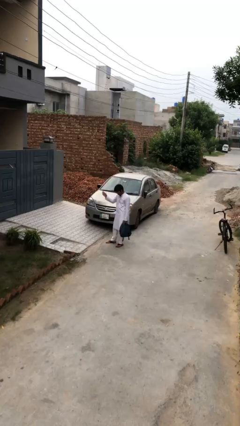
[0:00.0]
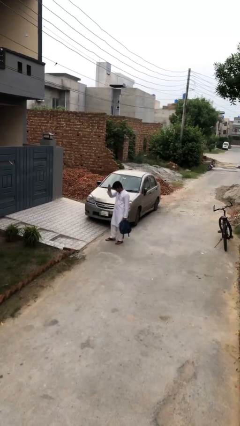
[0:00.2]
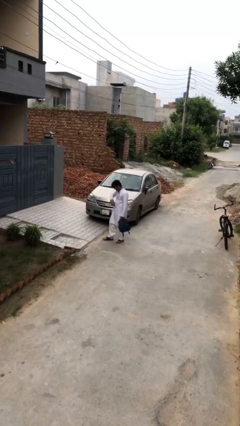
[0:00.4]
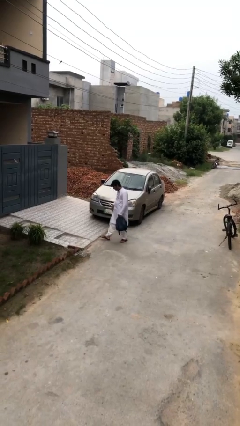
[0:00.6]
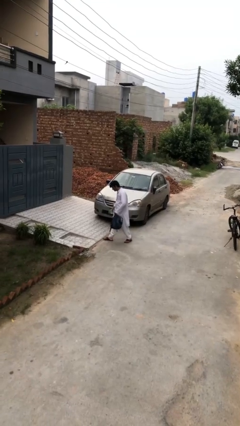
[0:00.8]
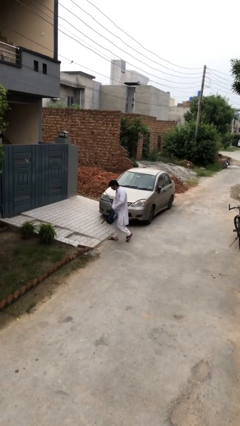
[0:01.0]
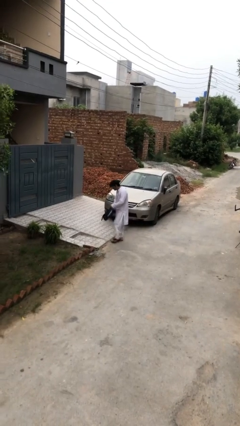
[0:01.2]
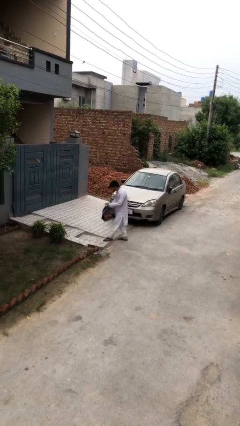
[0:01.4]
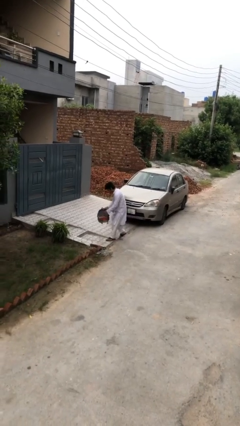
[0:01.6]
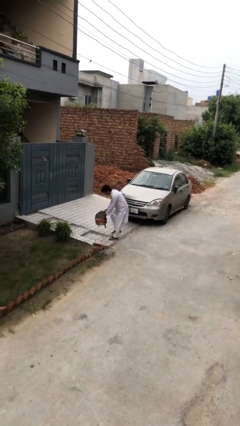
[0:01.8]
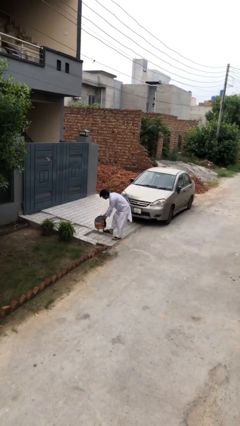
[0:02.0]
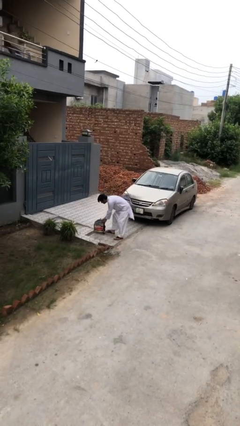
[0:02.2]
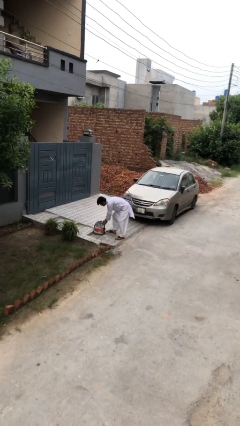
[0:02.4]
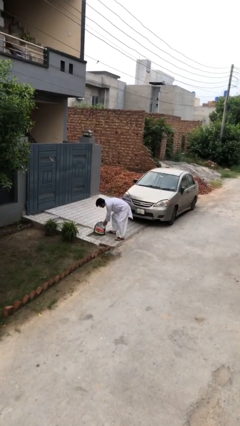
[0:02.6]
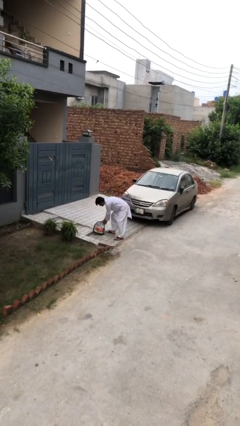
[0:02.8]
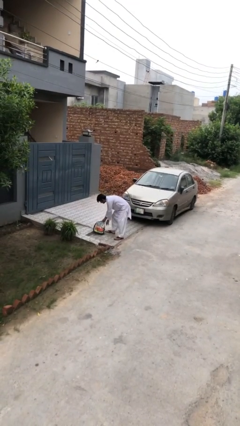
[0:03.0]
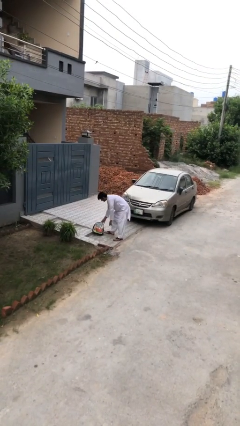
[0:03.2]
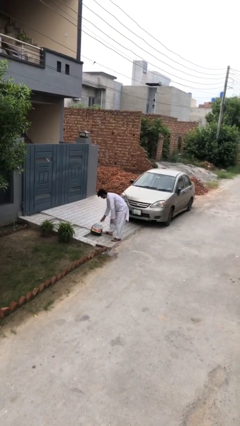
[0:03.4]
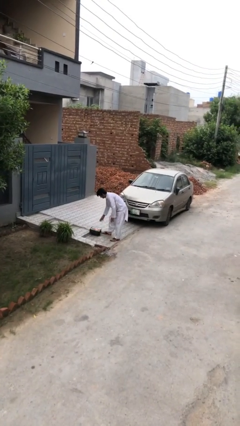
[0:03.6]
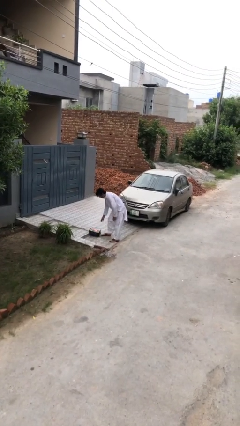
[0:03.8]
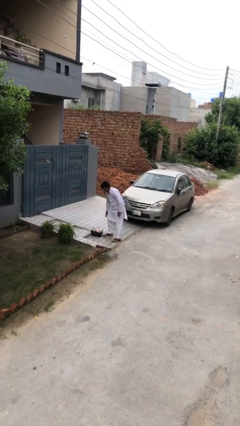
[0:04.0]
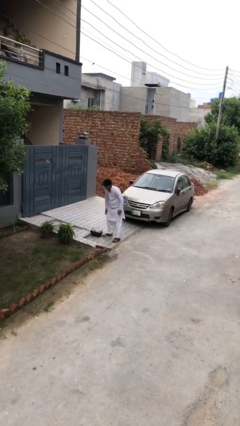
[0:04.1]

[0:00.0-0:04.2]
person puts down object on floor

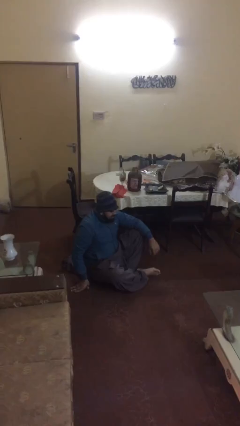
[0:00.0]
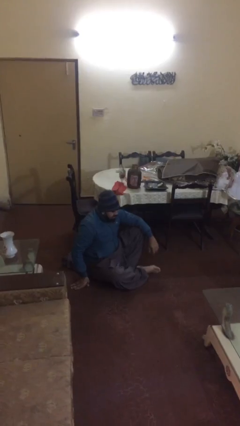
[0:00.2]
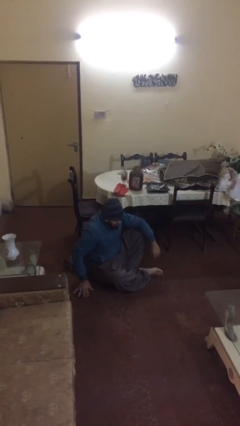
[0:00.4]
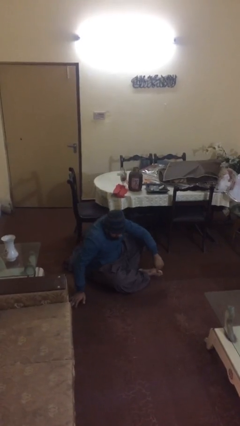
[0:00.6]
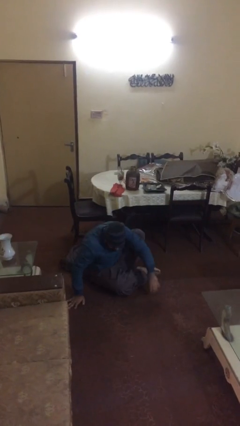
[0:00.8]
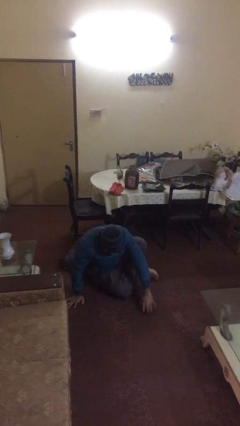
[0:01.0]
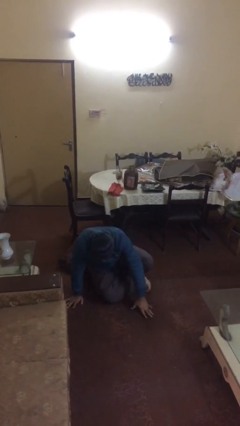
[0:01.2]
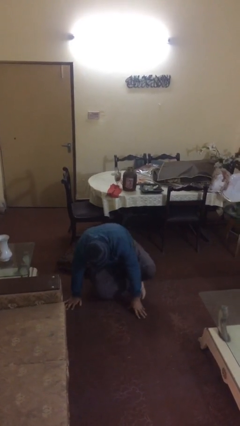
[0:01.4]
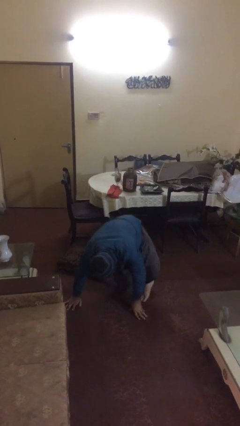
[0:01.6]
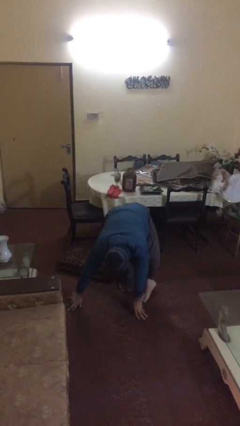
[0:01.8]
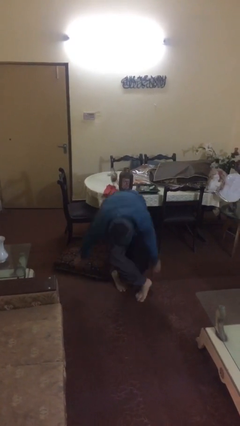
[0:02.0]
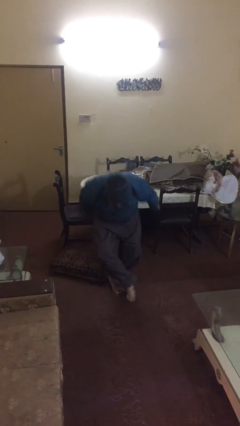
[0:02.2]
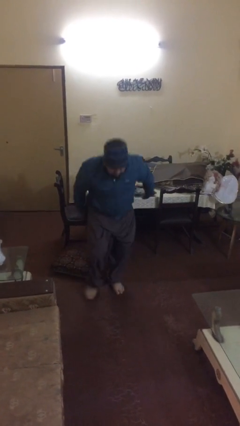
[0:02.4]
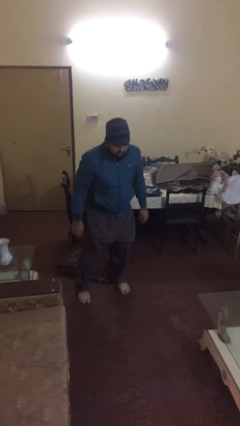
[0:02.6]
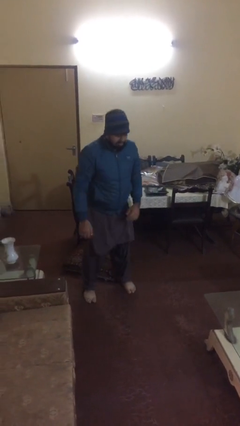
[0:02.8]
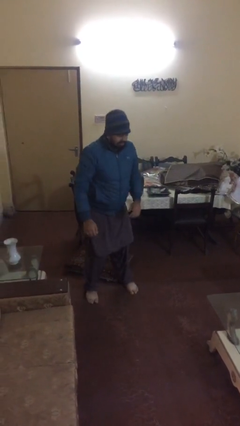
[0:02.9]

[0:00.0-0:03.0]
person stands up

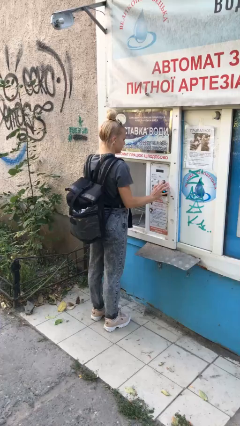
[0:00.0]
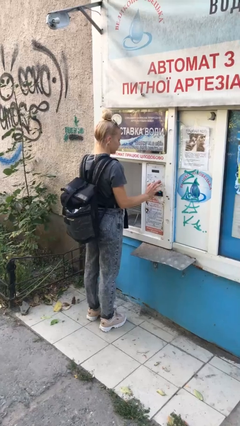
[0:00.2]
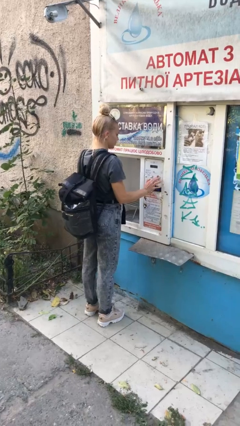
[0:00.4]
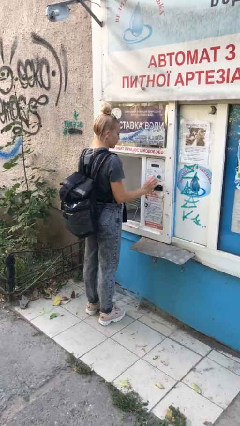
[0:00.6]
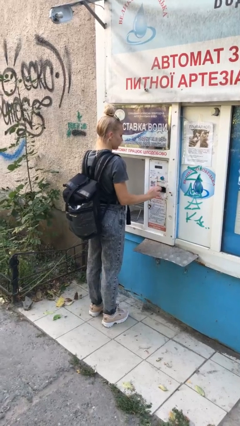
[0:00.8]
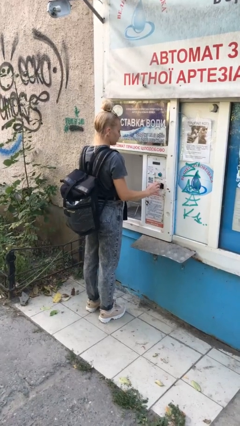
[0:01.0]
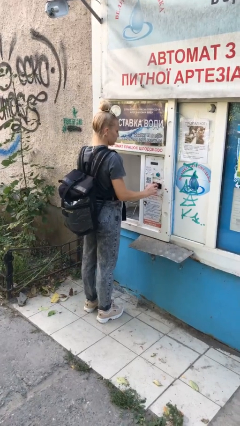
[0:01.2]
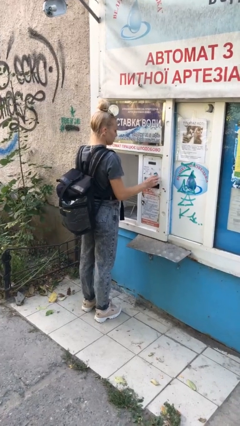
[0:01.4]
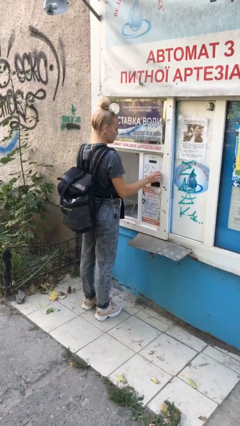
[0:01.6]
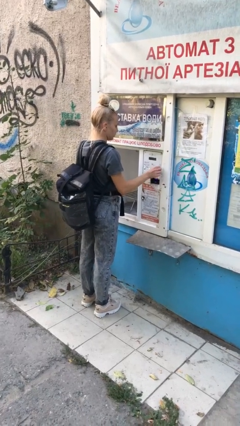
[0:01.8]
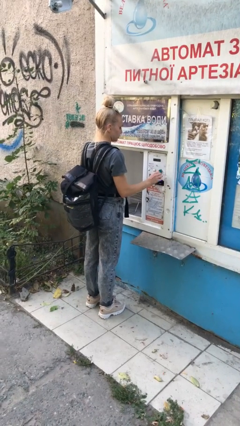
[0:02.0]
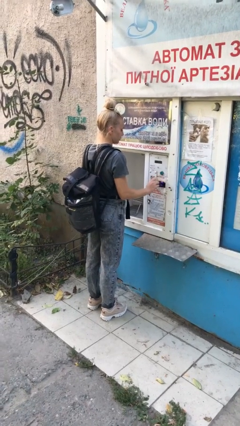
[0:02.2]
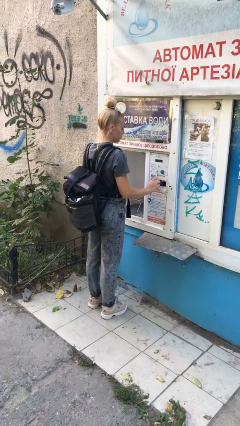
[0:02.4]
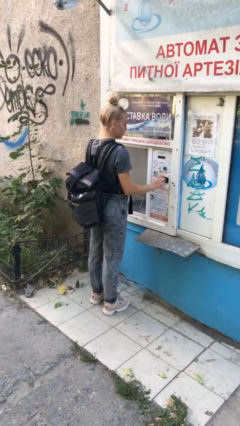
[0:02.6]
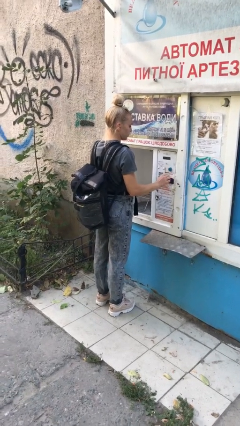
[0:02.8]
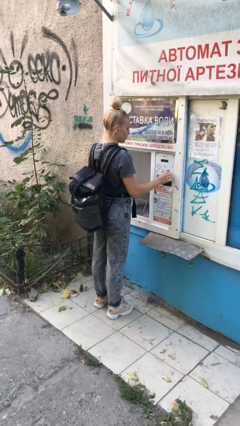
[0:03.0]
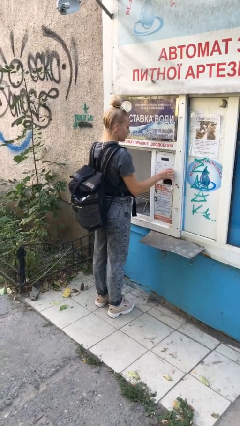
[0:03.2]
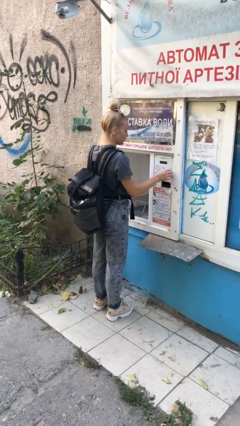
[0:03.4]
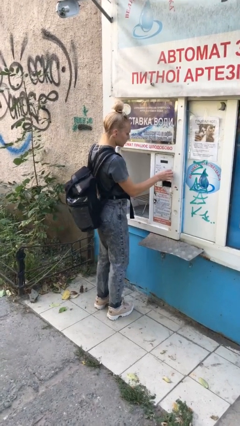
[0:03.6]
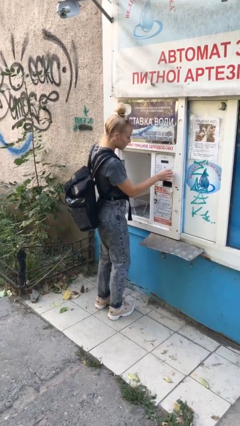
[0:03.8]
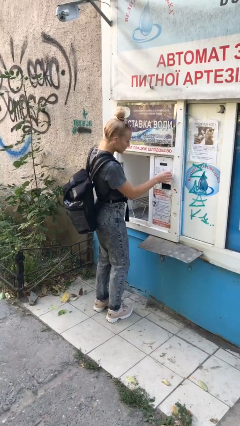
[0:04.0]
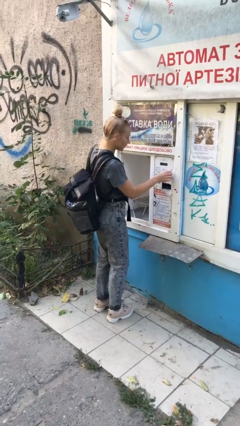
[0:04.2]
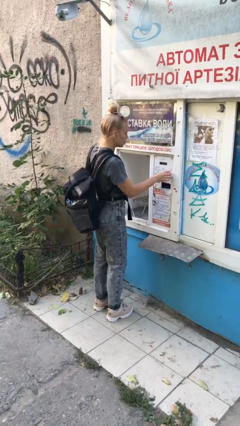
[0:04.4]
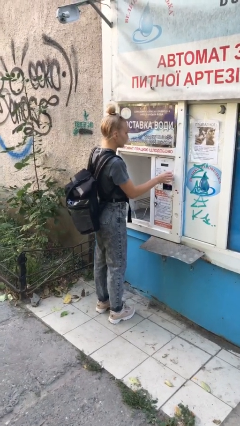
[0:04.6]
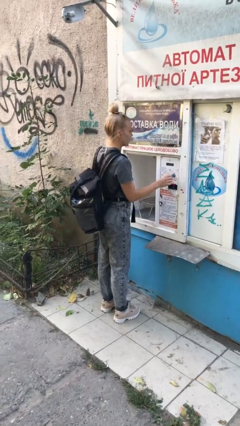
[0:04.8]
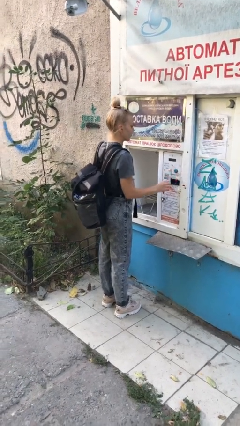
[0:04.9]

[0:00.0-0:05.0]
person purchases from machine

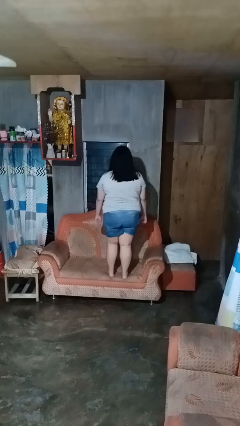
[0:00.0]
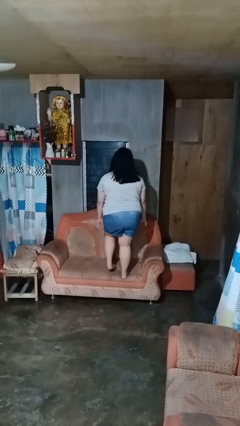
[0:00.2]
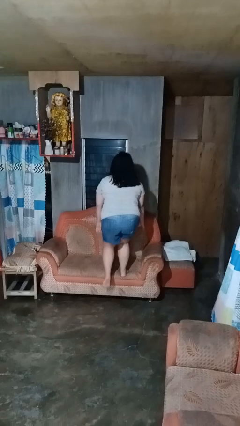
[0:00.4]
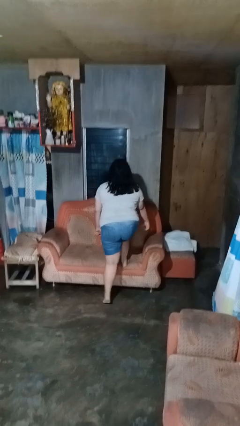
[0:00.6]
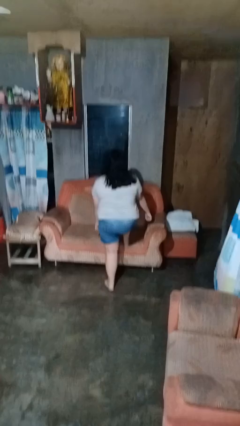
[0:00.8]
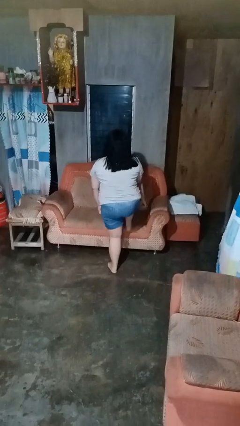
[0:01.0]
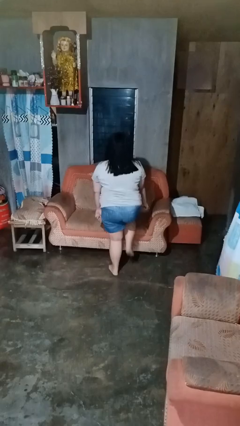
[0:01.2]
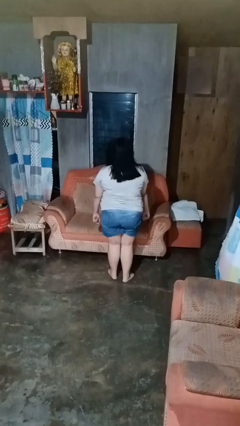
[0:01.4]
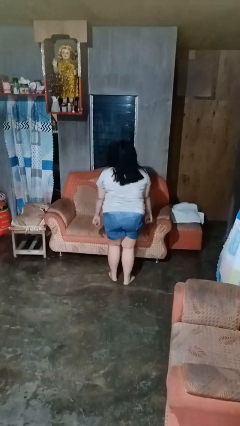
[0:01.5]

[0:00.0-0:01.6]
person climbs off couch

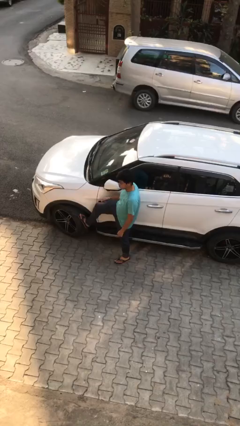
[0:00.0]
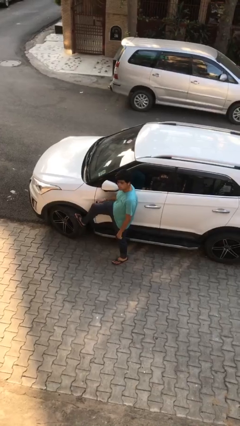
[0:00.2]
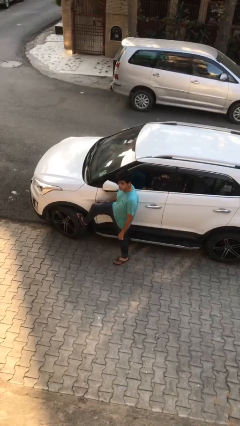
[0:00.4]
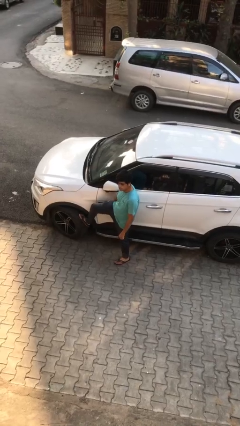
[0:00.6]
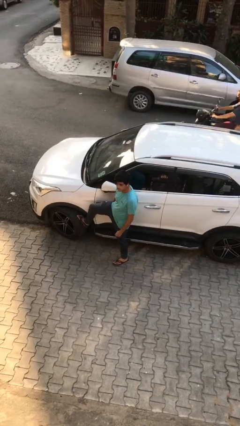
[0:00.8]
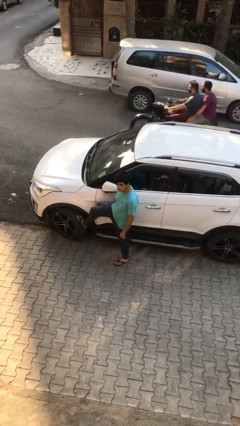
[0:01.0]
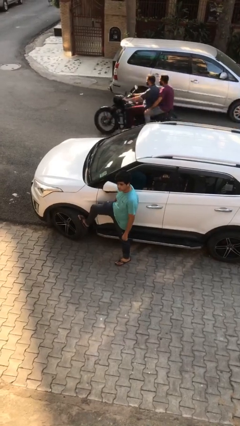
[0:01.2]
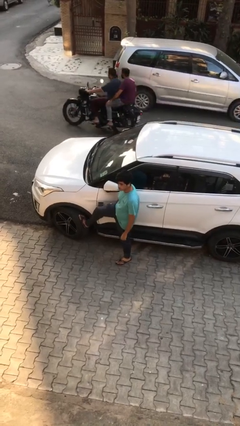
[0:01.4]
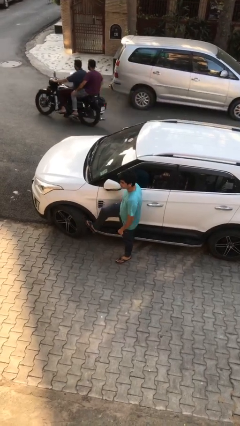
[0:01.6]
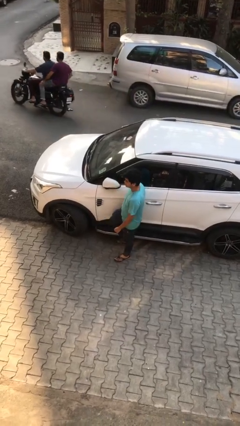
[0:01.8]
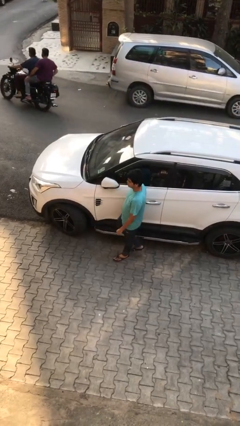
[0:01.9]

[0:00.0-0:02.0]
person kicks car tires

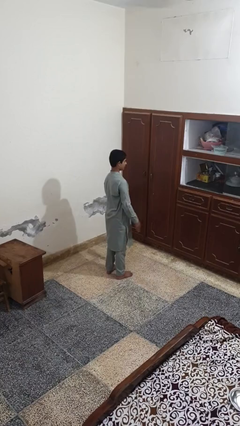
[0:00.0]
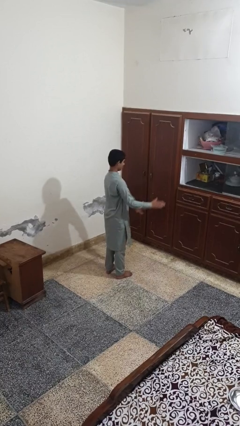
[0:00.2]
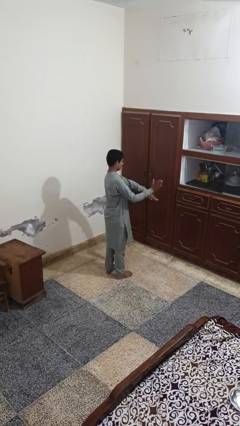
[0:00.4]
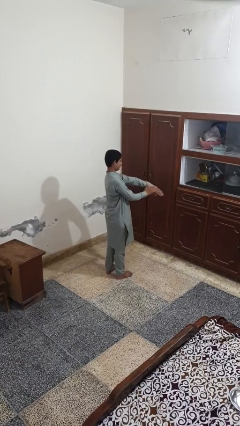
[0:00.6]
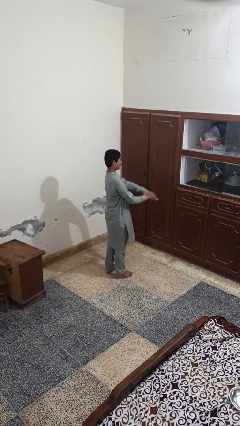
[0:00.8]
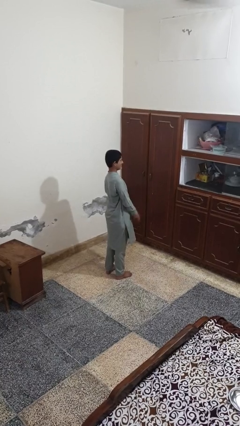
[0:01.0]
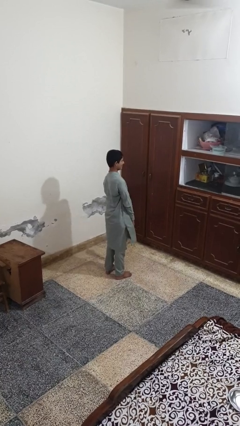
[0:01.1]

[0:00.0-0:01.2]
person swats bug

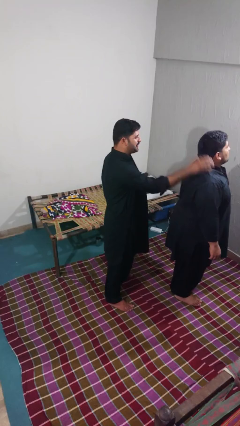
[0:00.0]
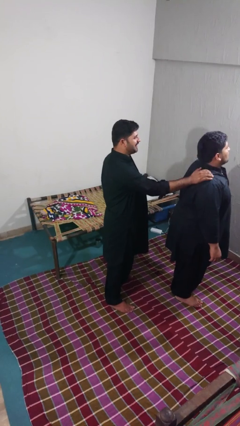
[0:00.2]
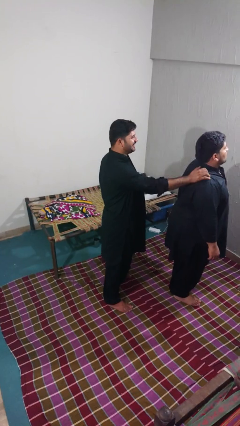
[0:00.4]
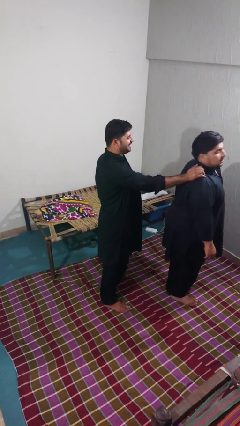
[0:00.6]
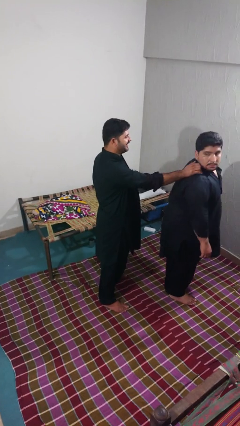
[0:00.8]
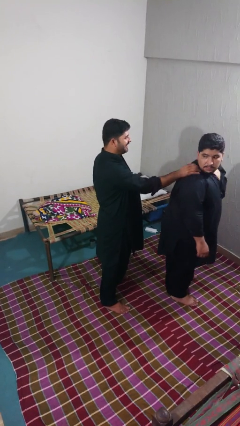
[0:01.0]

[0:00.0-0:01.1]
person touches back of person
